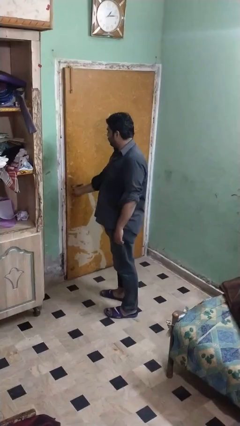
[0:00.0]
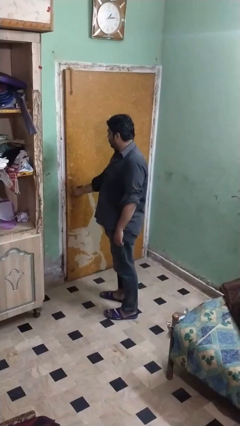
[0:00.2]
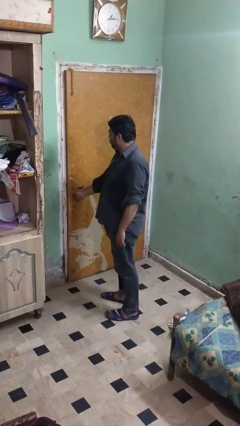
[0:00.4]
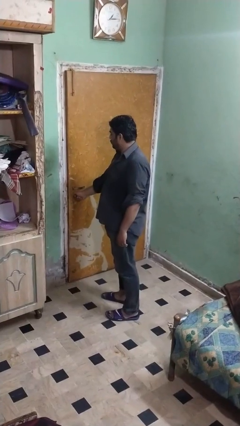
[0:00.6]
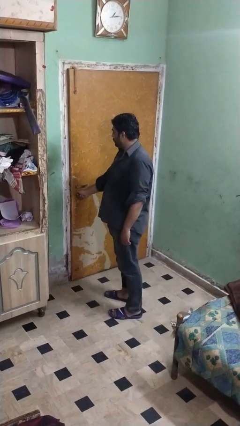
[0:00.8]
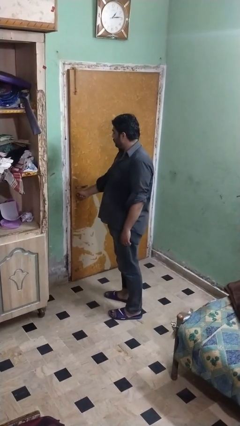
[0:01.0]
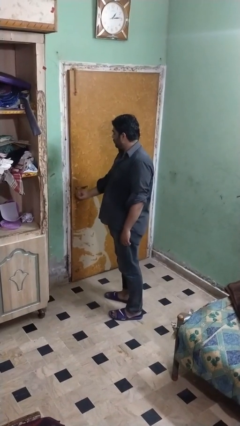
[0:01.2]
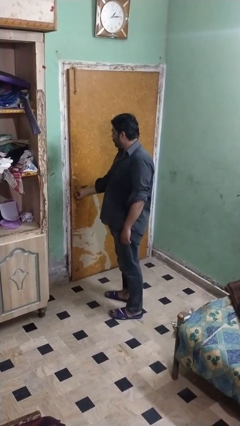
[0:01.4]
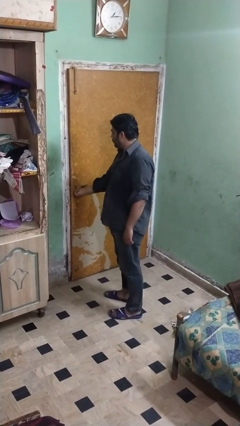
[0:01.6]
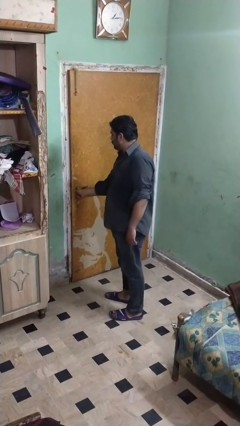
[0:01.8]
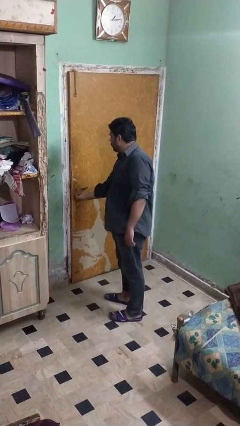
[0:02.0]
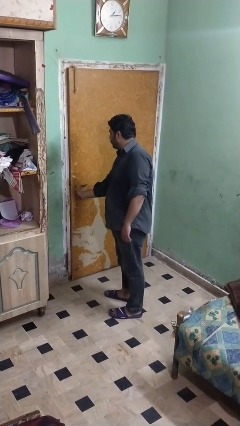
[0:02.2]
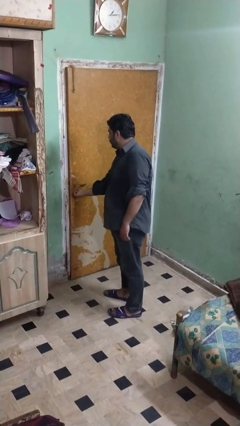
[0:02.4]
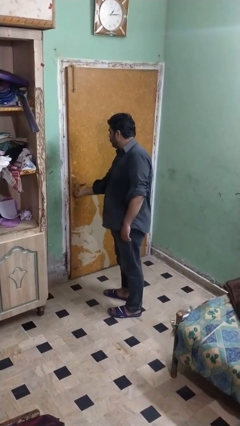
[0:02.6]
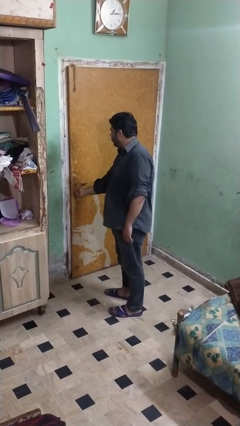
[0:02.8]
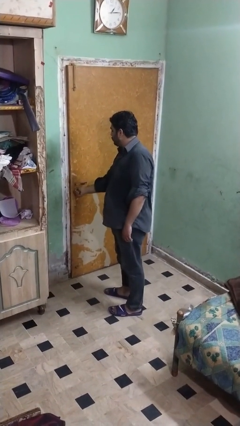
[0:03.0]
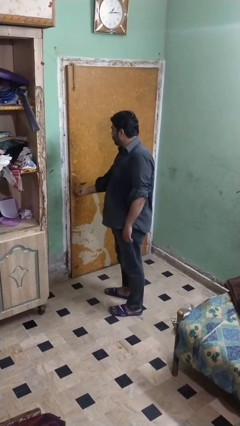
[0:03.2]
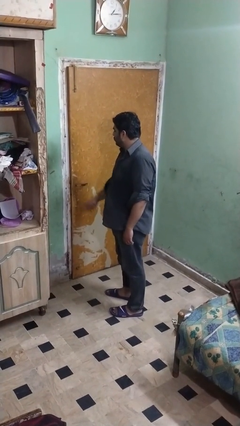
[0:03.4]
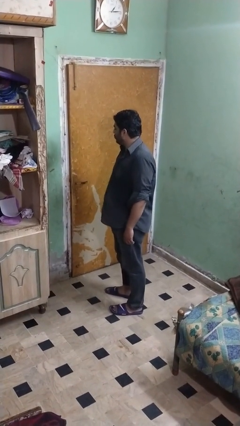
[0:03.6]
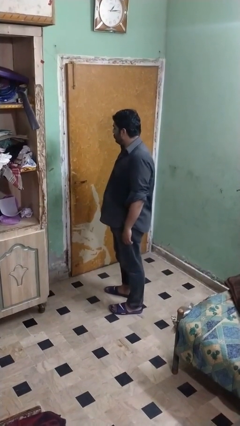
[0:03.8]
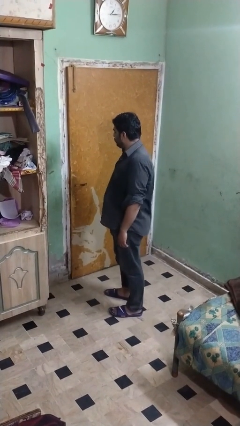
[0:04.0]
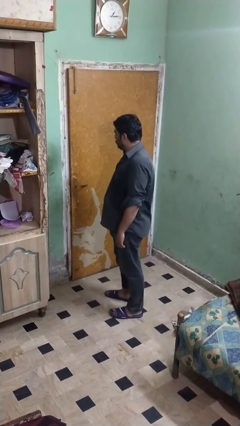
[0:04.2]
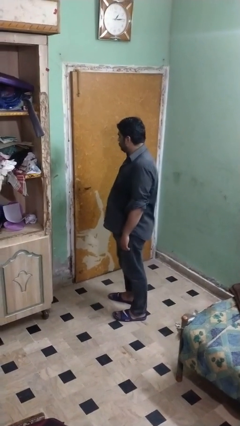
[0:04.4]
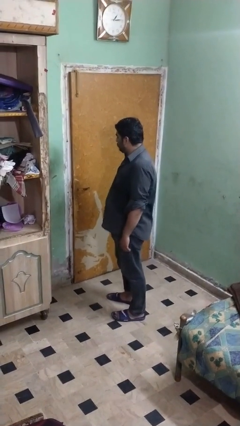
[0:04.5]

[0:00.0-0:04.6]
person unlocks door with keys

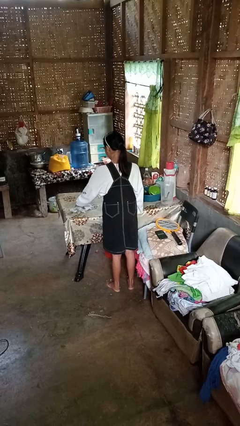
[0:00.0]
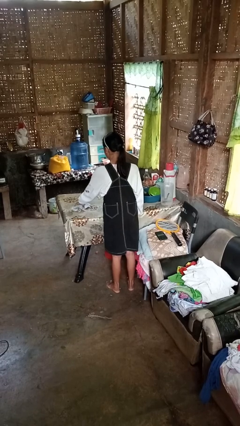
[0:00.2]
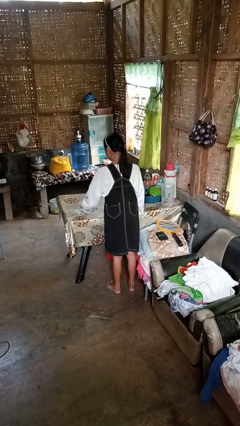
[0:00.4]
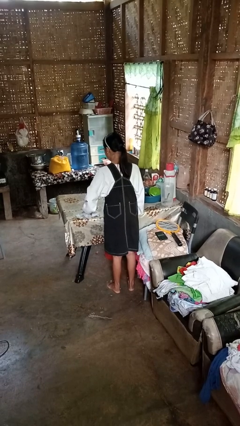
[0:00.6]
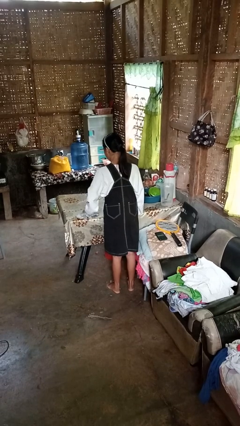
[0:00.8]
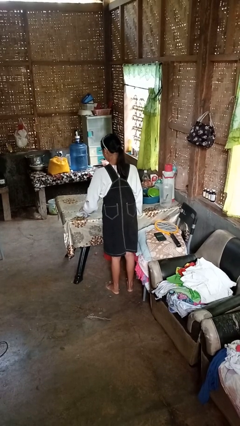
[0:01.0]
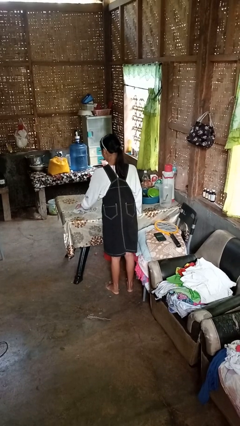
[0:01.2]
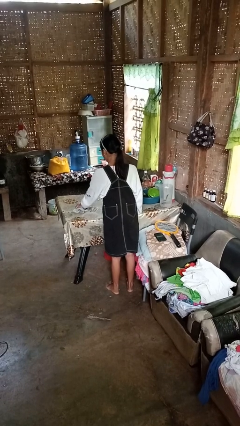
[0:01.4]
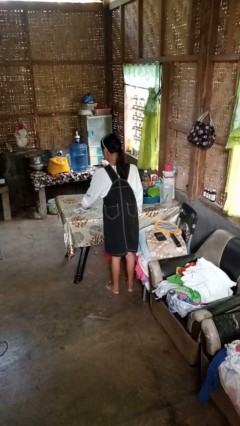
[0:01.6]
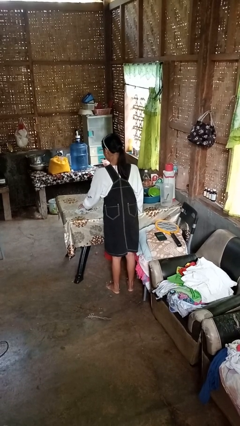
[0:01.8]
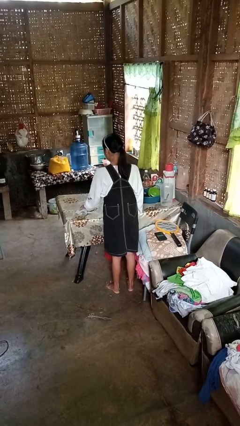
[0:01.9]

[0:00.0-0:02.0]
person cleans table with rag

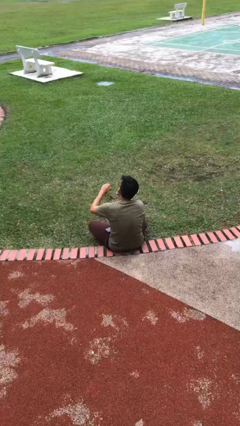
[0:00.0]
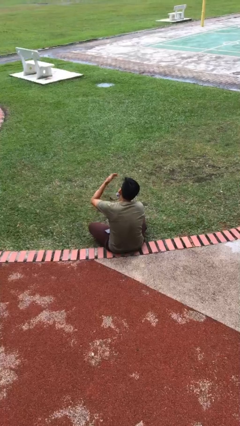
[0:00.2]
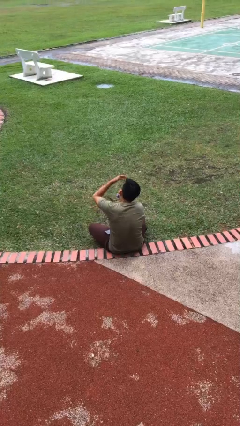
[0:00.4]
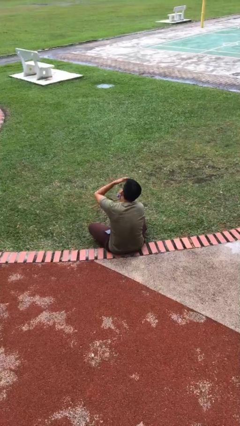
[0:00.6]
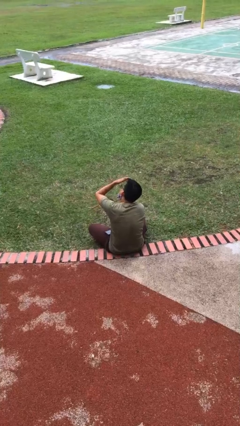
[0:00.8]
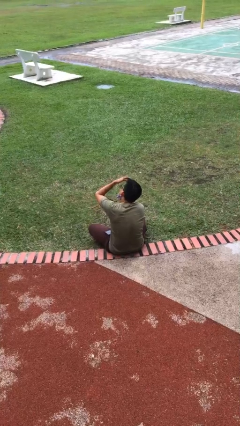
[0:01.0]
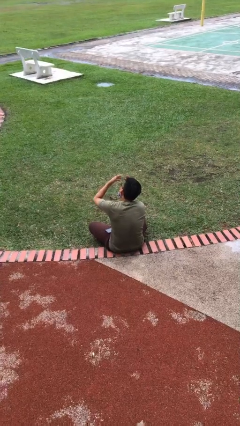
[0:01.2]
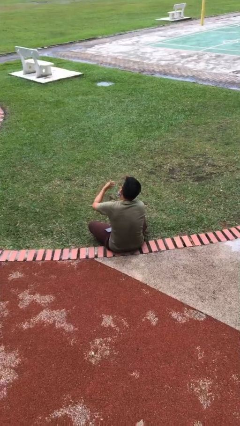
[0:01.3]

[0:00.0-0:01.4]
person shades eyes

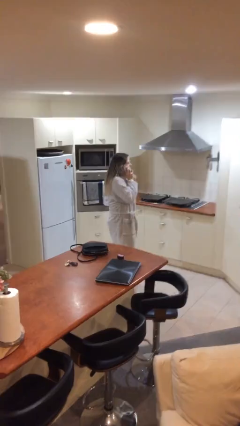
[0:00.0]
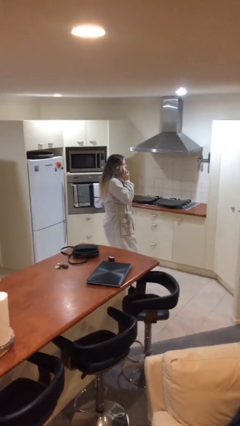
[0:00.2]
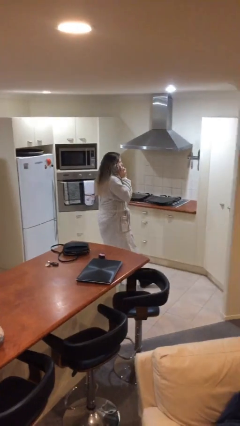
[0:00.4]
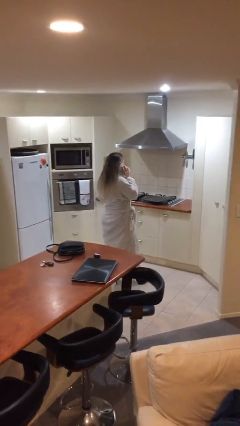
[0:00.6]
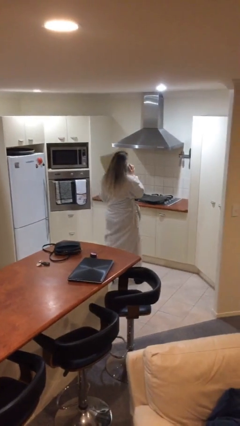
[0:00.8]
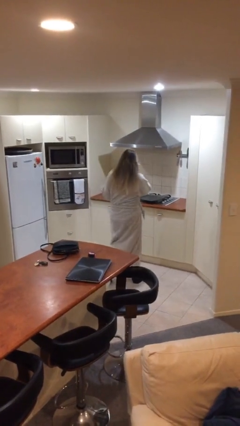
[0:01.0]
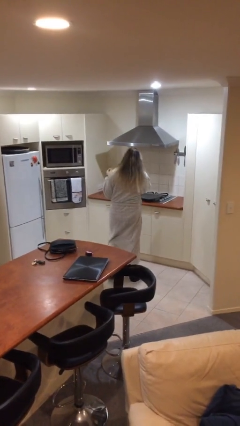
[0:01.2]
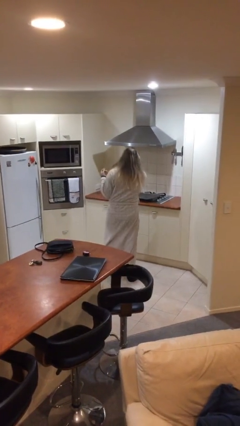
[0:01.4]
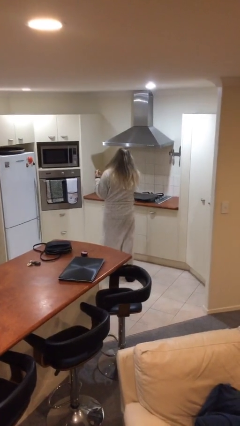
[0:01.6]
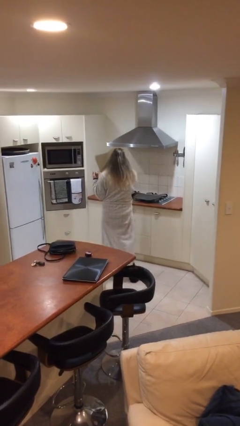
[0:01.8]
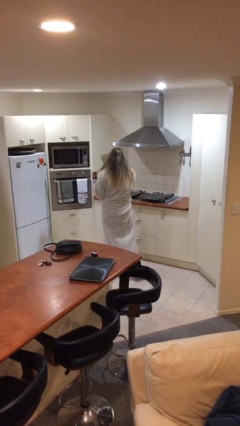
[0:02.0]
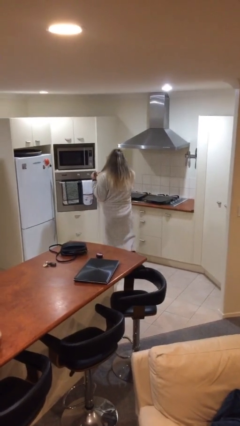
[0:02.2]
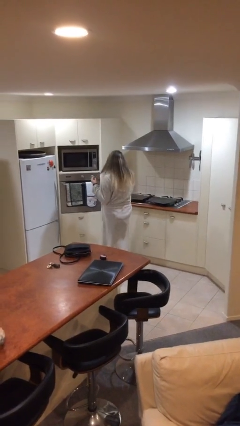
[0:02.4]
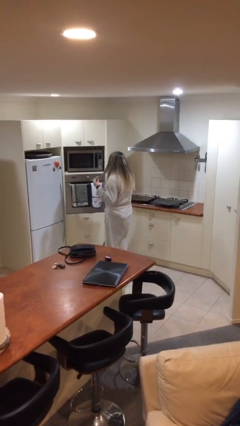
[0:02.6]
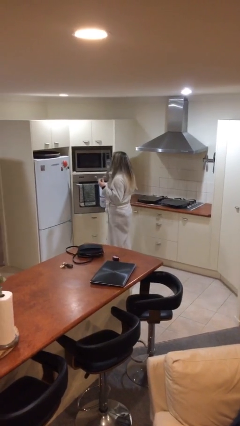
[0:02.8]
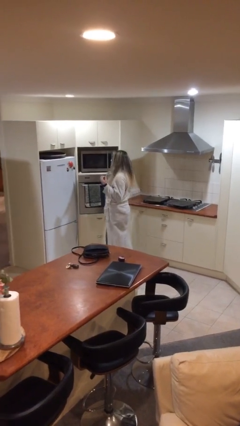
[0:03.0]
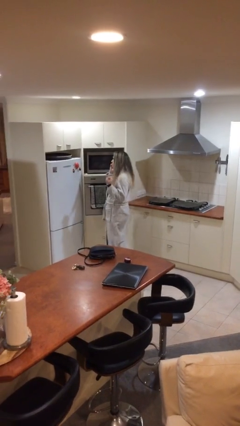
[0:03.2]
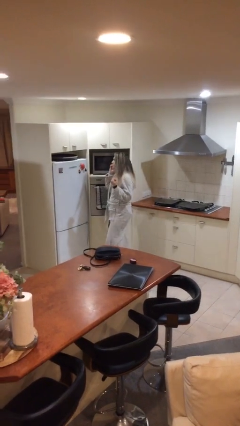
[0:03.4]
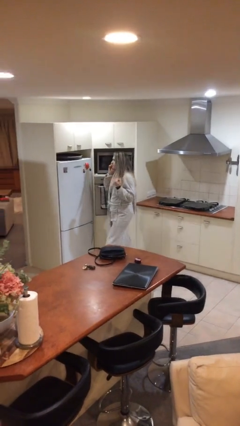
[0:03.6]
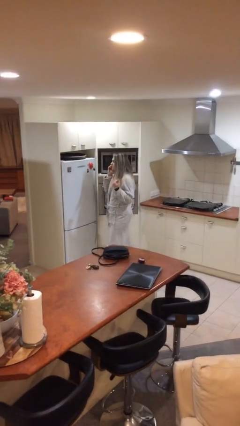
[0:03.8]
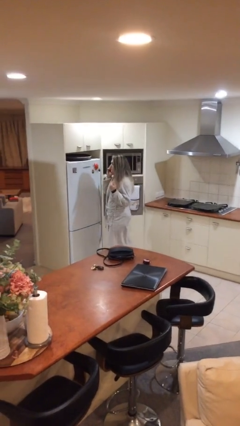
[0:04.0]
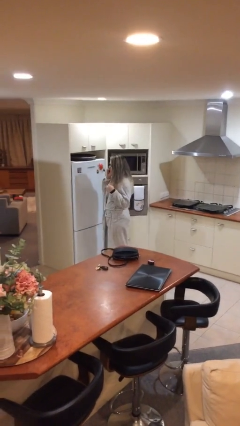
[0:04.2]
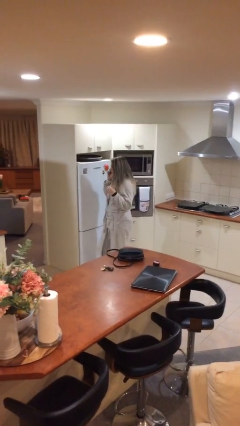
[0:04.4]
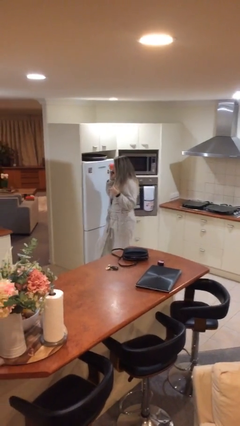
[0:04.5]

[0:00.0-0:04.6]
person talks on phone

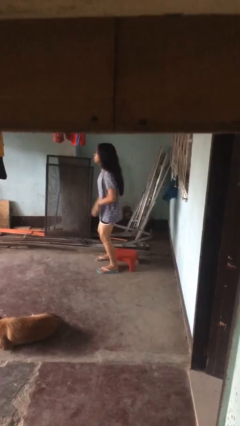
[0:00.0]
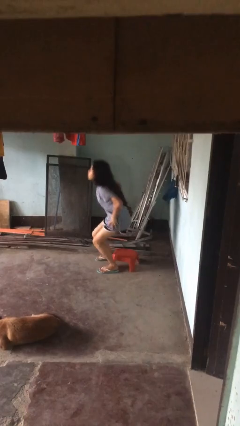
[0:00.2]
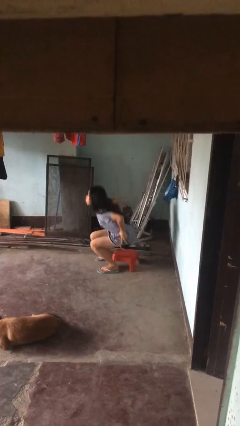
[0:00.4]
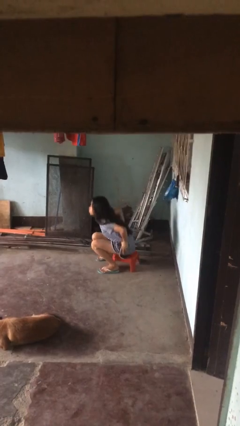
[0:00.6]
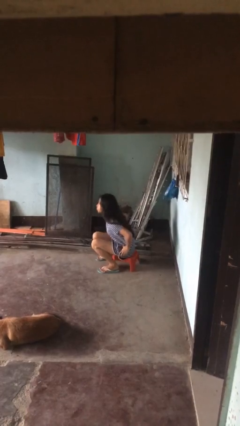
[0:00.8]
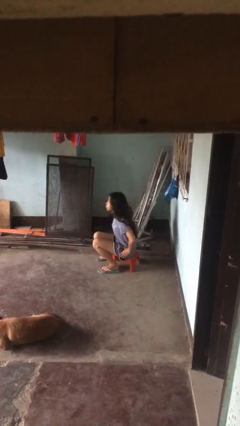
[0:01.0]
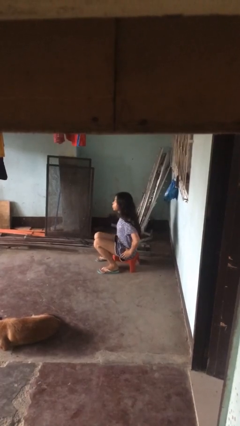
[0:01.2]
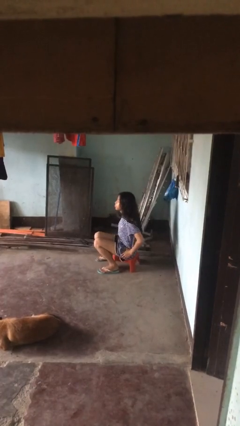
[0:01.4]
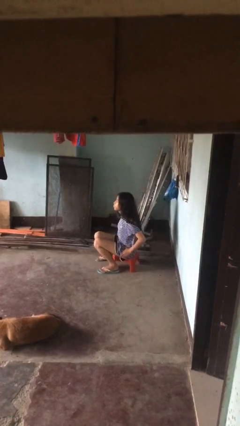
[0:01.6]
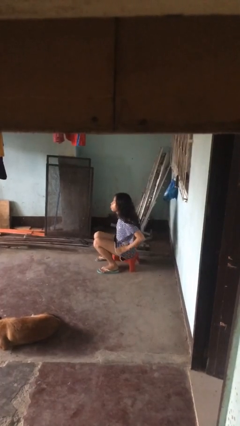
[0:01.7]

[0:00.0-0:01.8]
person sits down

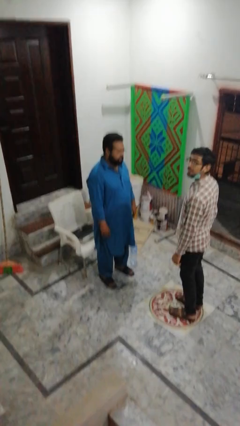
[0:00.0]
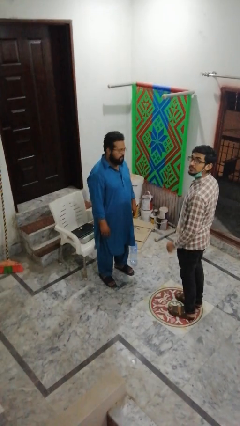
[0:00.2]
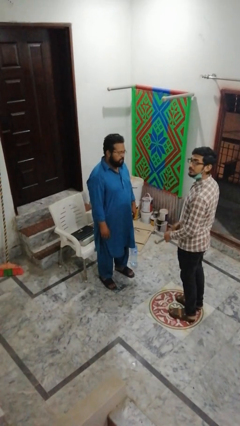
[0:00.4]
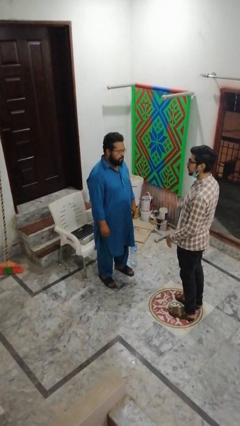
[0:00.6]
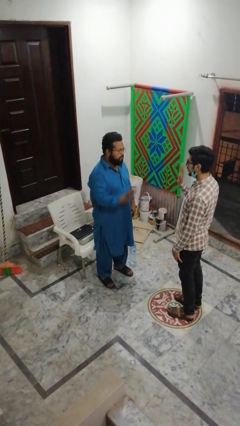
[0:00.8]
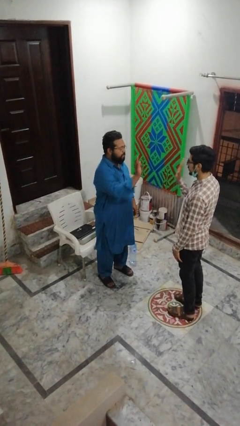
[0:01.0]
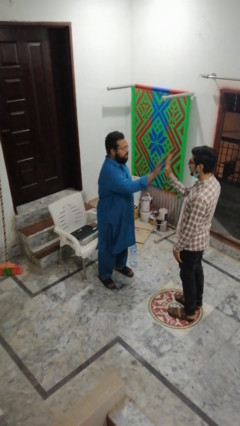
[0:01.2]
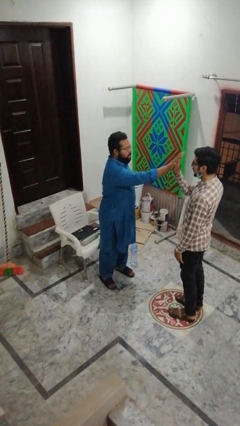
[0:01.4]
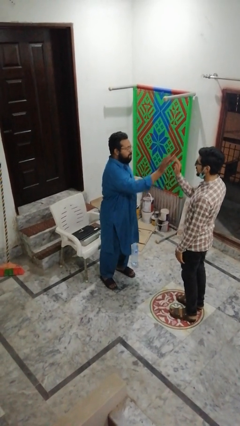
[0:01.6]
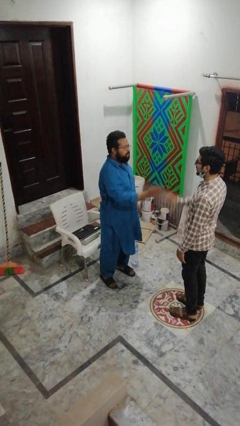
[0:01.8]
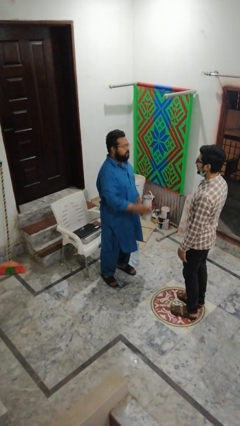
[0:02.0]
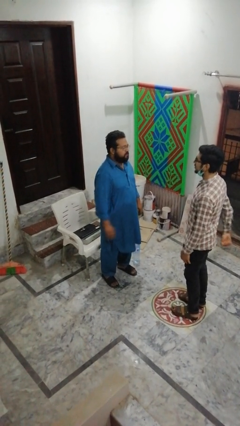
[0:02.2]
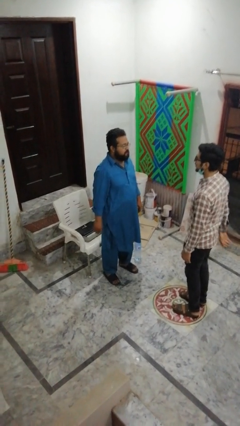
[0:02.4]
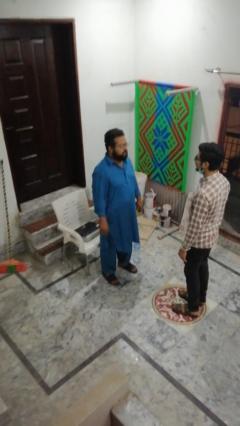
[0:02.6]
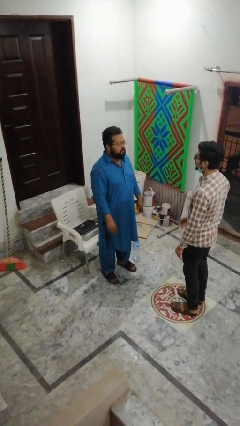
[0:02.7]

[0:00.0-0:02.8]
person highfives hand

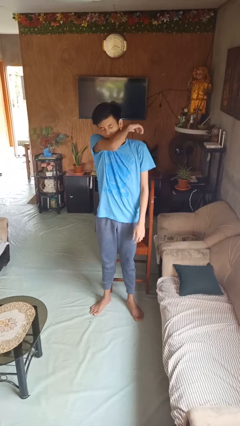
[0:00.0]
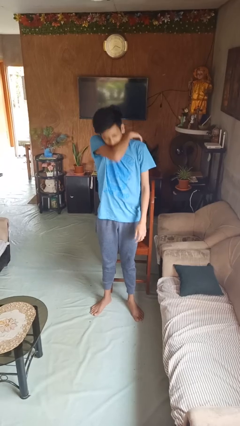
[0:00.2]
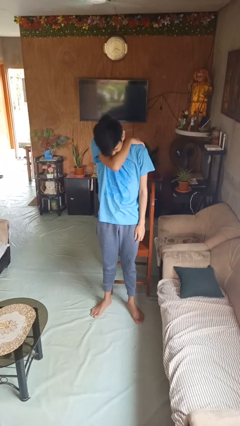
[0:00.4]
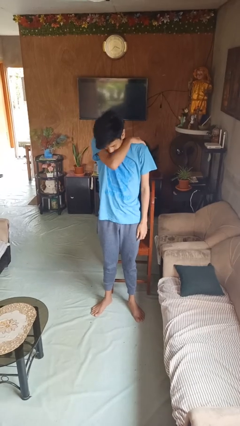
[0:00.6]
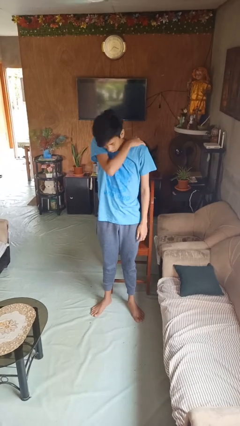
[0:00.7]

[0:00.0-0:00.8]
person sneezes into arm
